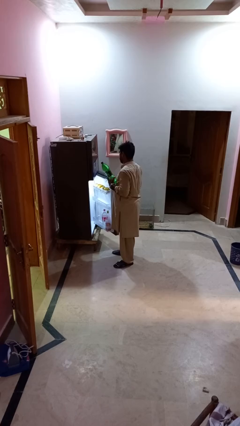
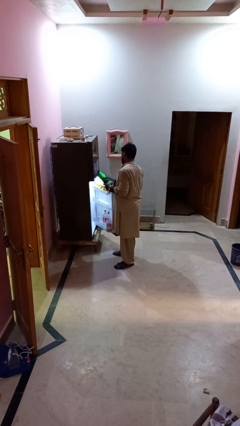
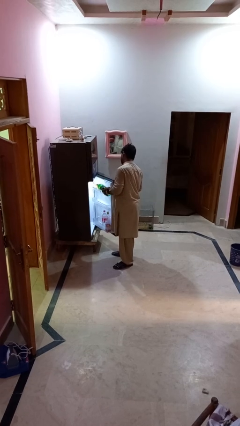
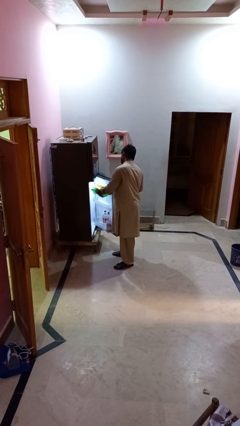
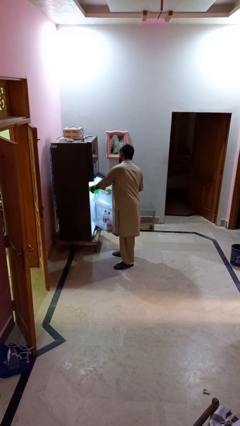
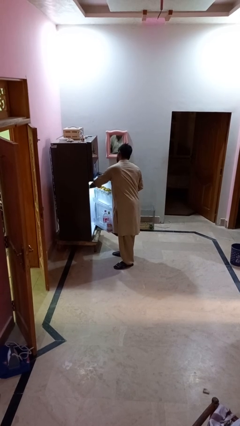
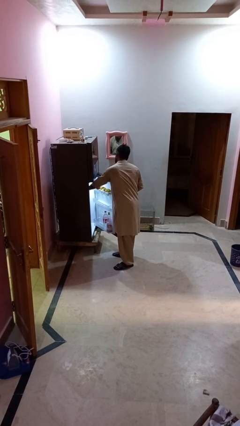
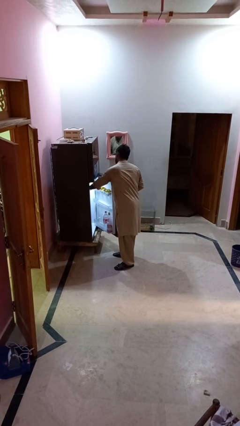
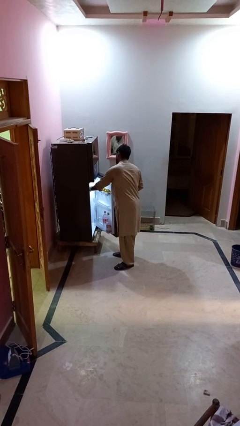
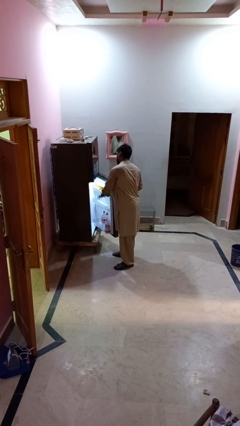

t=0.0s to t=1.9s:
person puts object into refrigerator

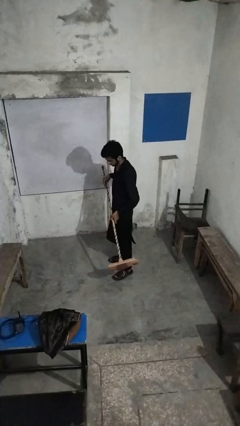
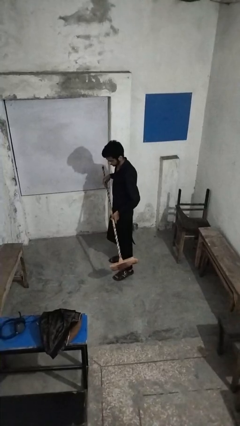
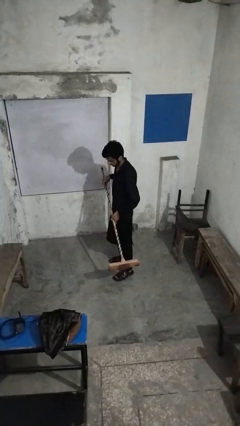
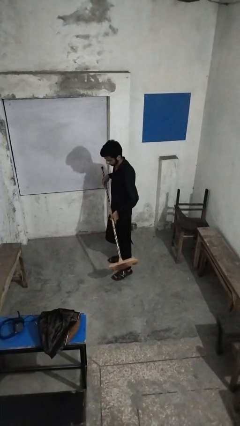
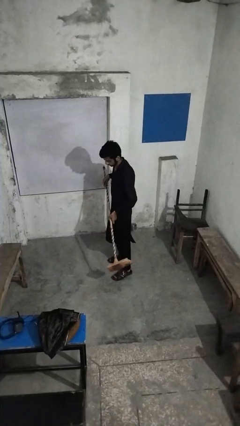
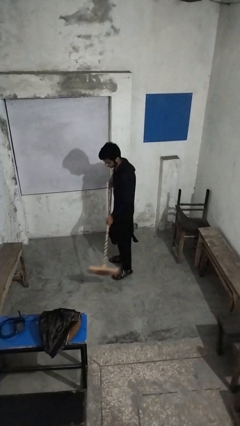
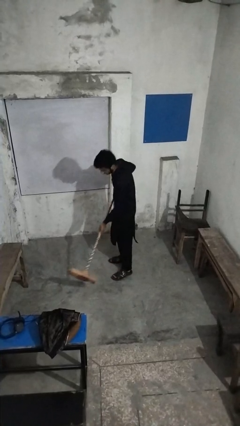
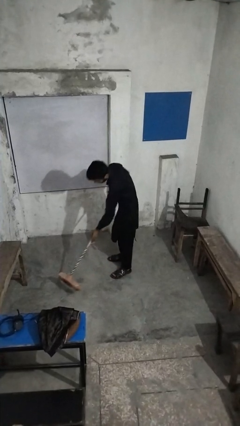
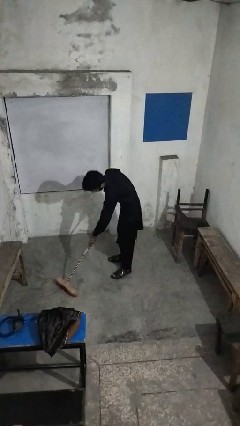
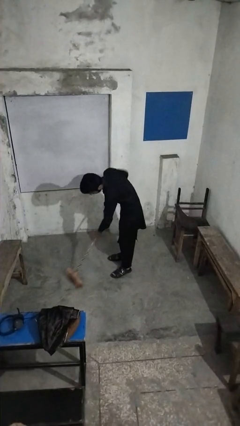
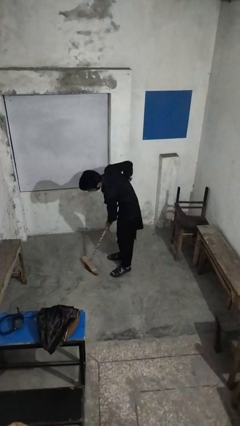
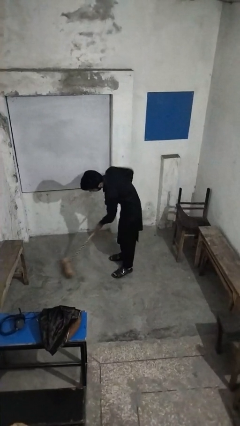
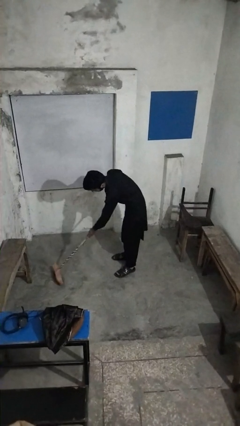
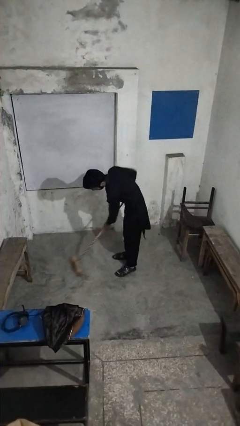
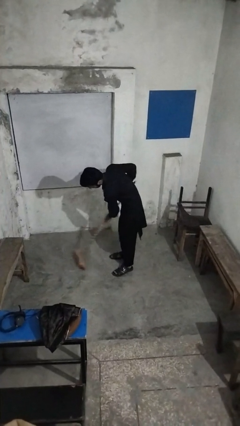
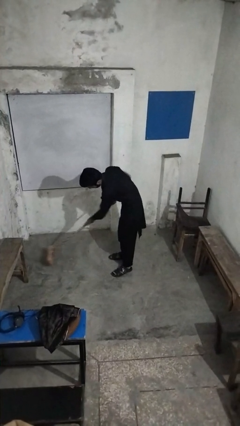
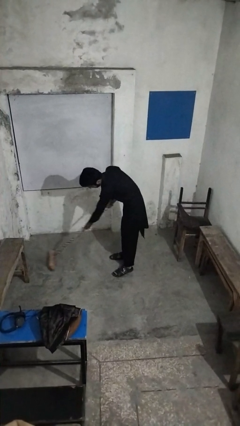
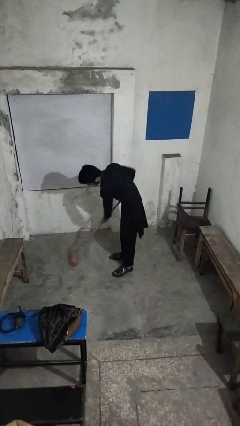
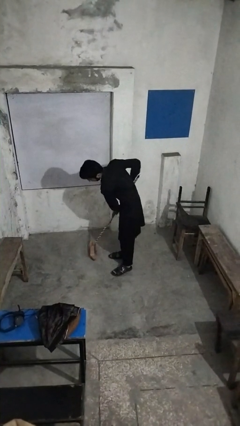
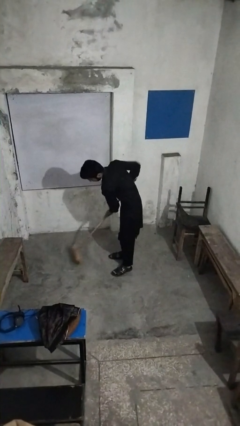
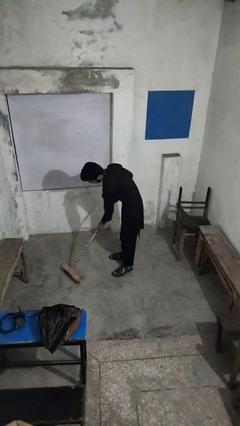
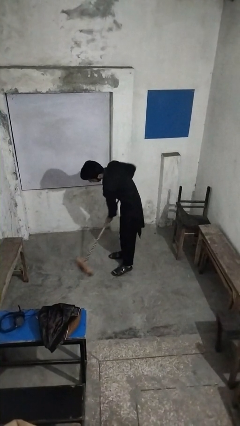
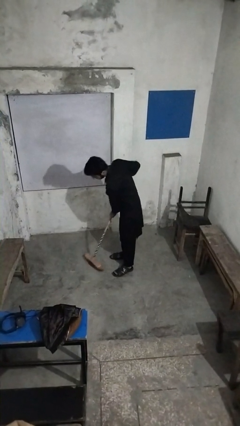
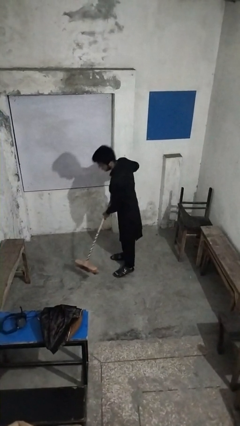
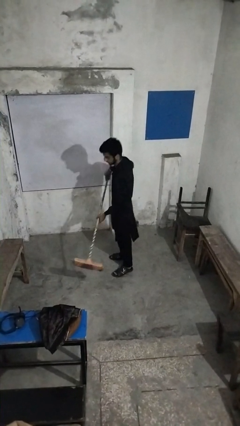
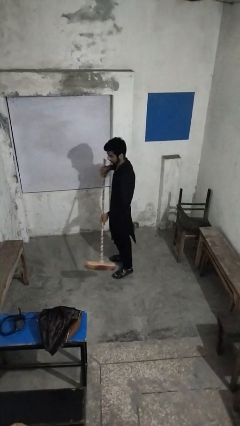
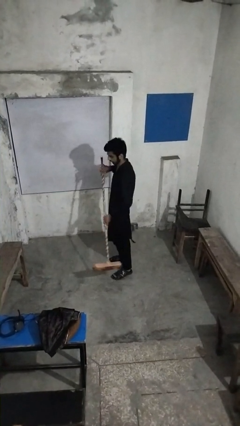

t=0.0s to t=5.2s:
person sweeps floor

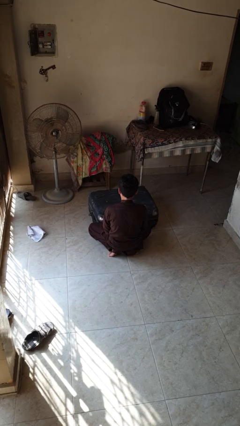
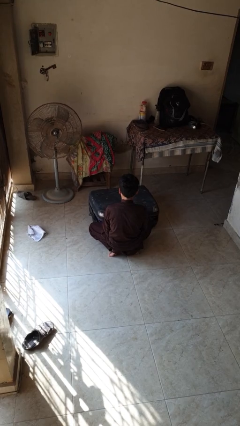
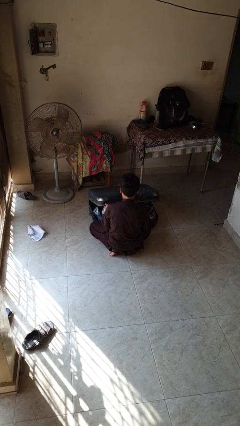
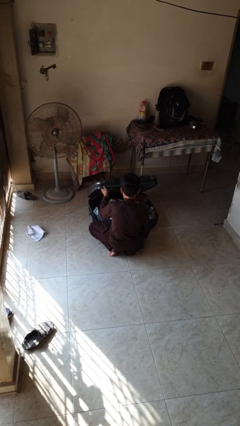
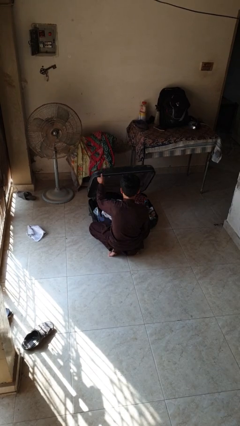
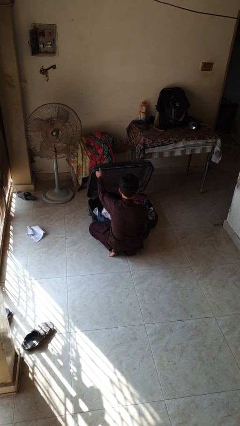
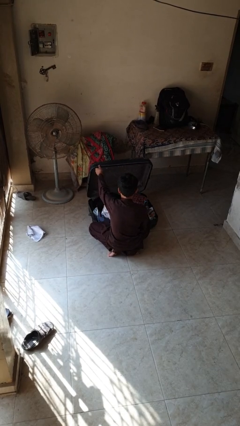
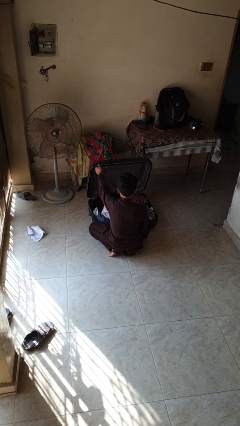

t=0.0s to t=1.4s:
person opens suitcase

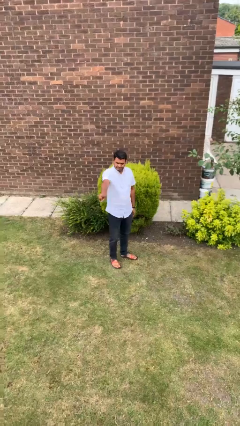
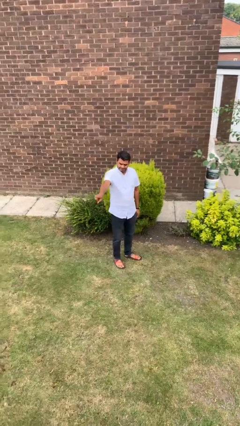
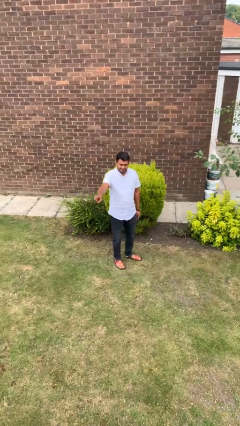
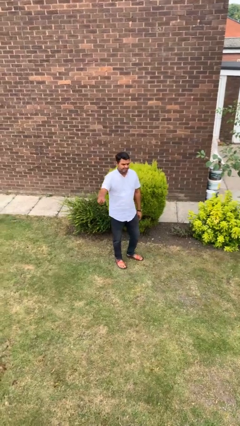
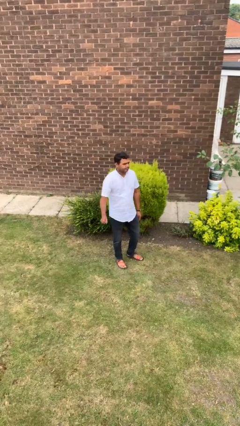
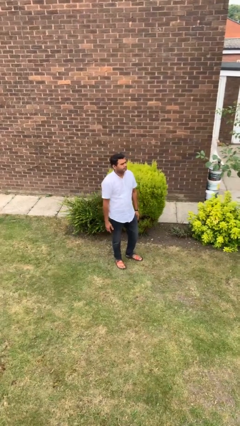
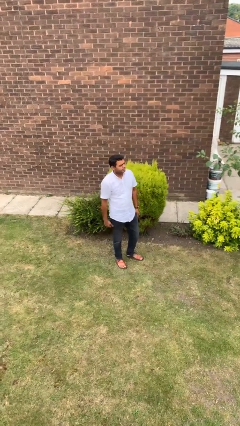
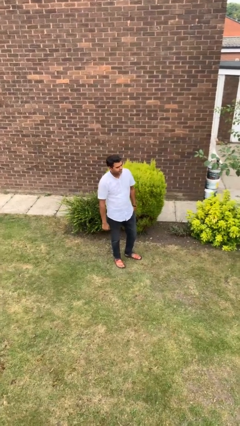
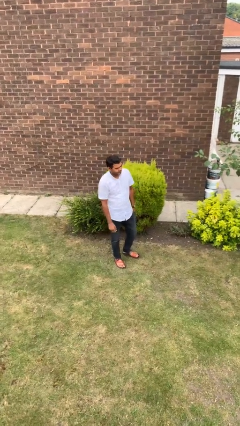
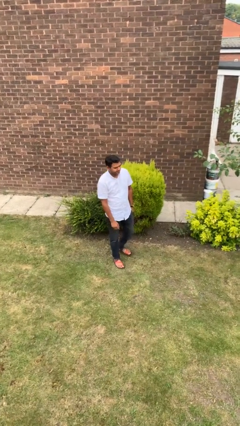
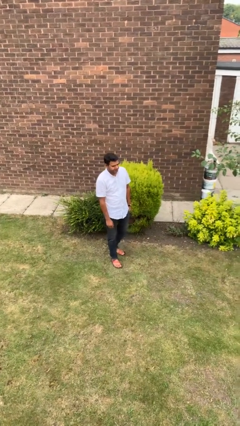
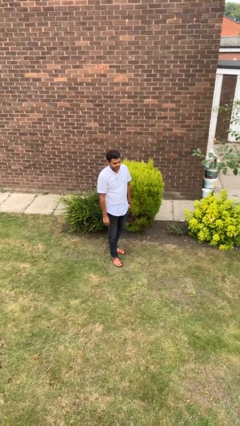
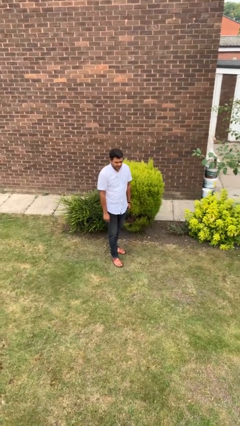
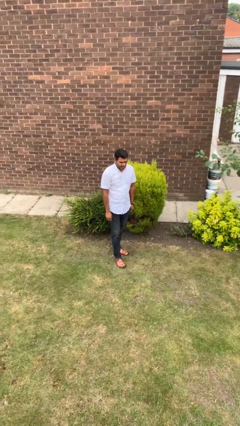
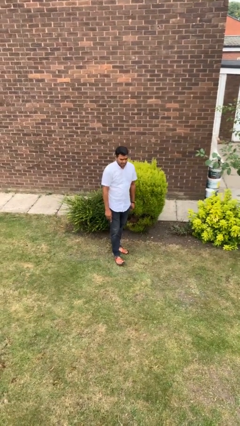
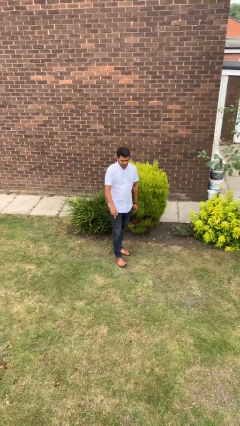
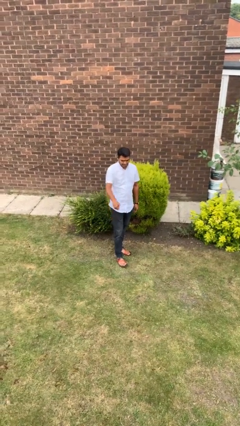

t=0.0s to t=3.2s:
person gestures swipe right

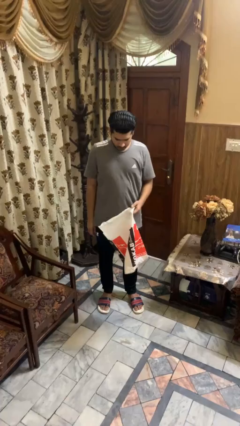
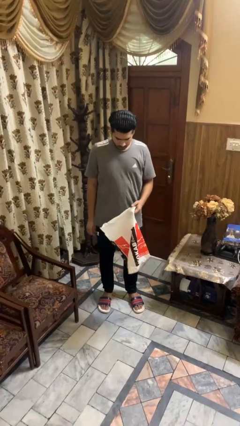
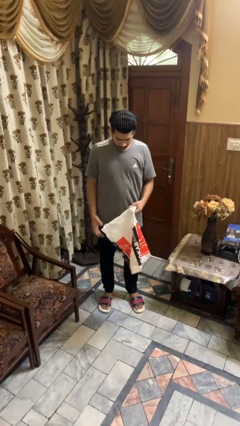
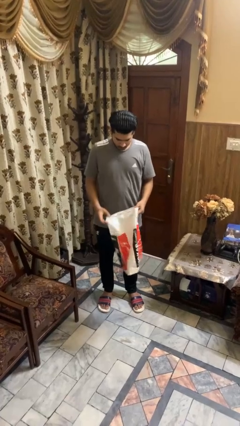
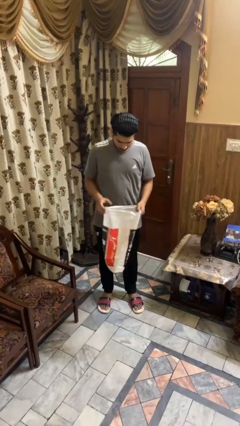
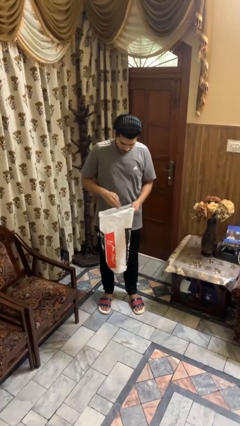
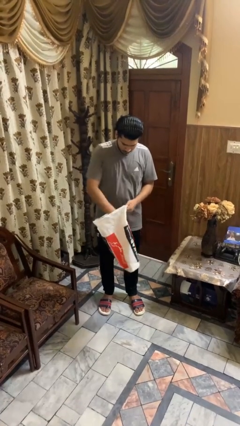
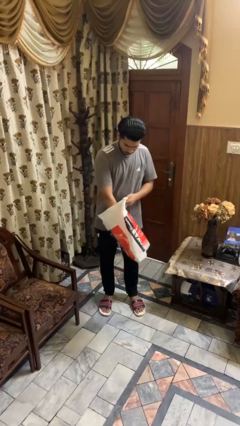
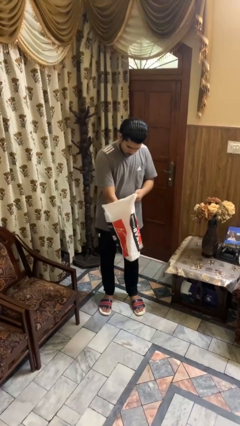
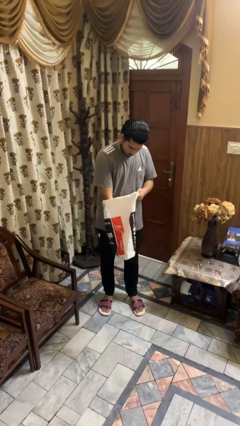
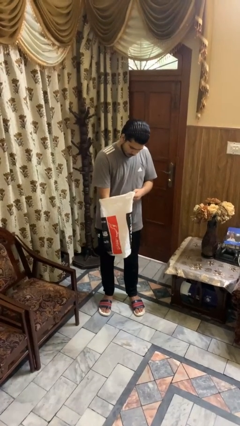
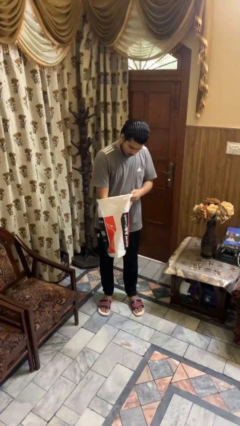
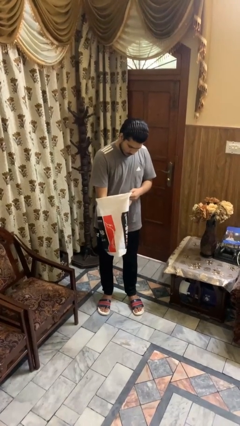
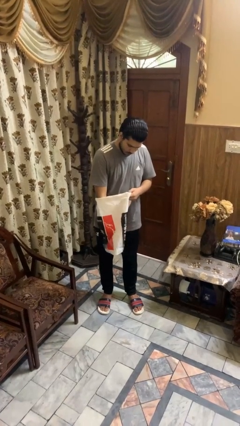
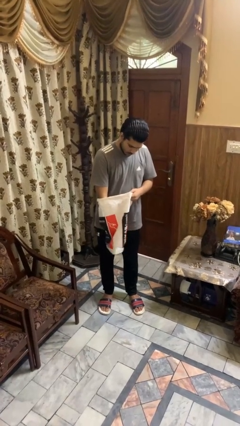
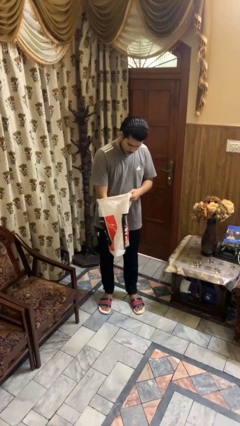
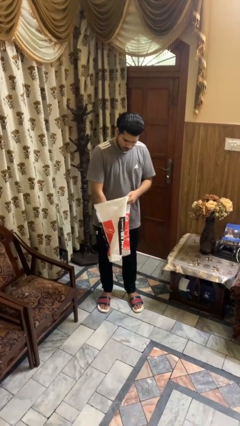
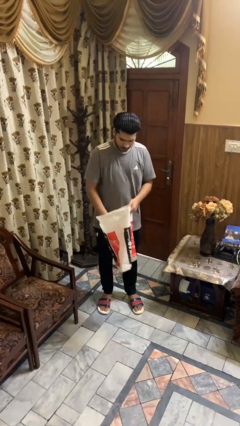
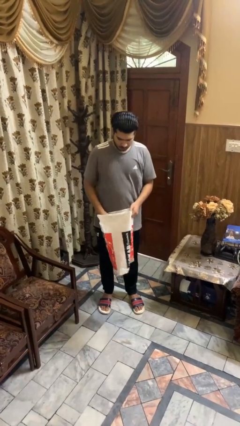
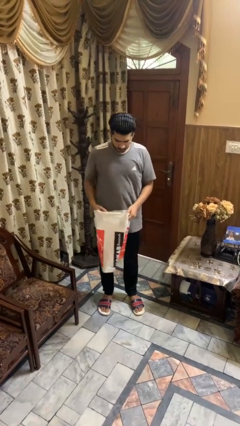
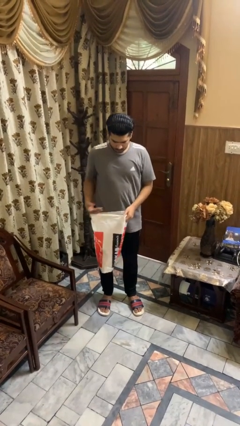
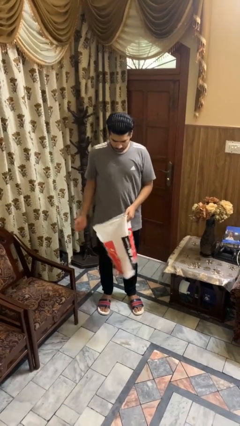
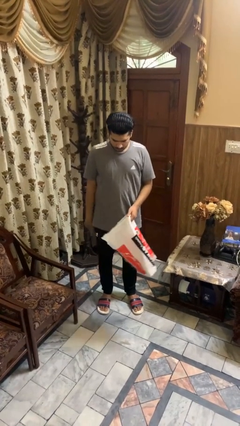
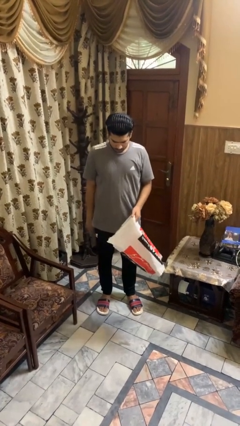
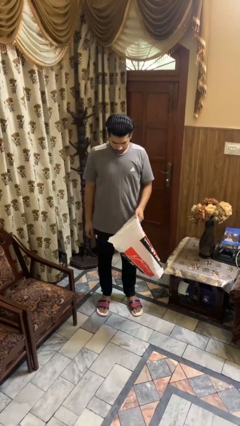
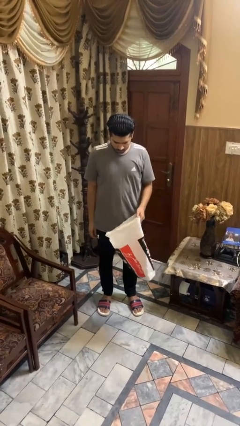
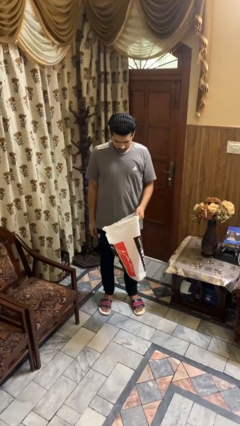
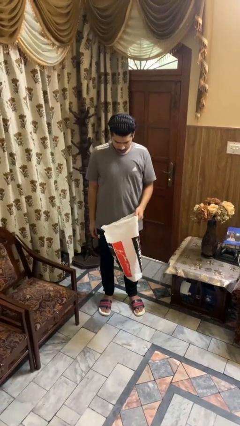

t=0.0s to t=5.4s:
person searches in bag

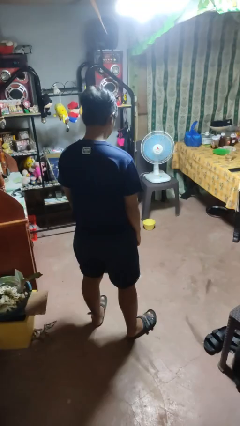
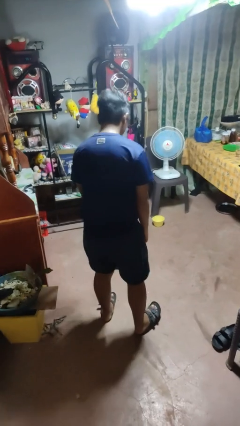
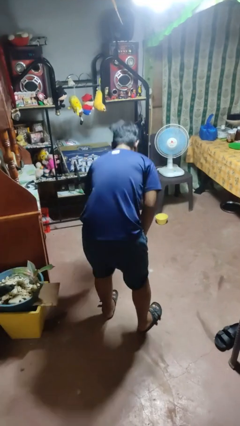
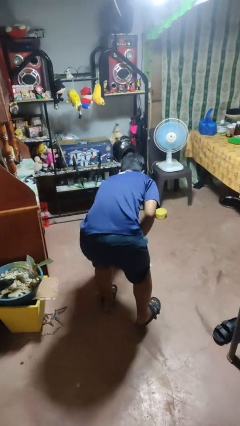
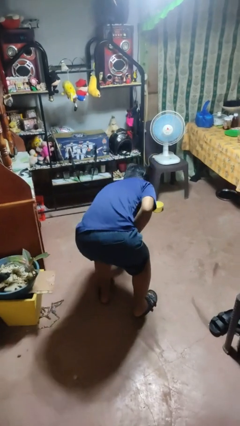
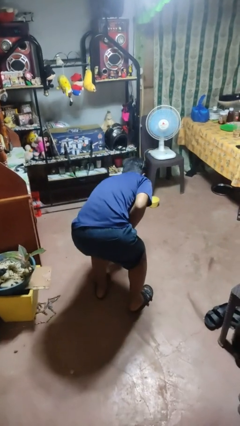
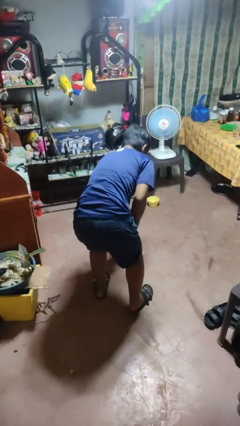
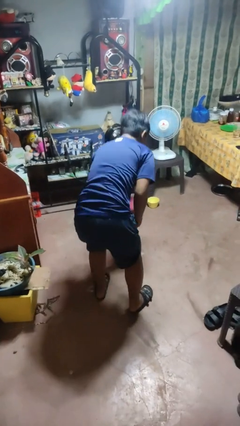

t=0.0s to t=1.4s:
person picks up object from floor
